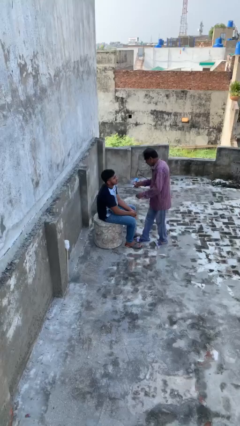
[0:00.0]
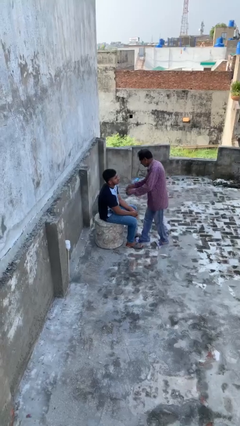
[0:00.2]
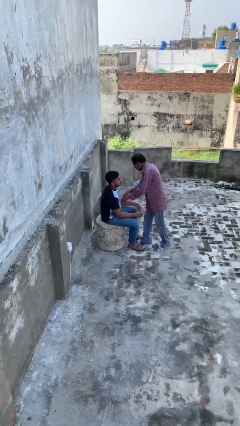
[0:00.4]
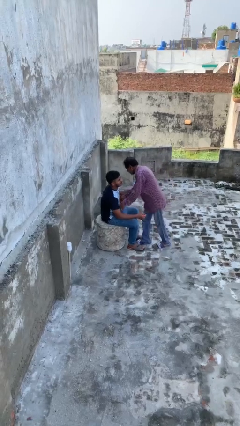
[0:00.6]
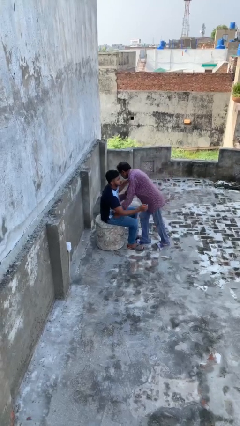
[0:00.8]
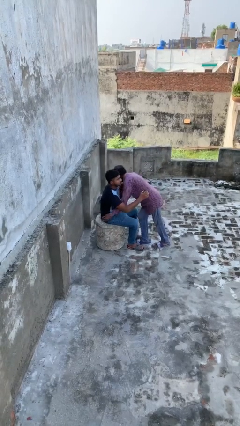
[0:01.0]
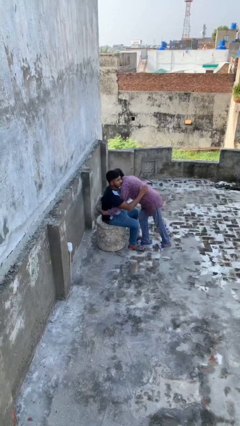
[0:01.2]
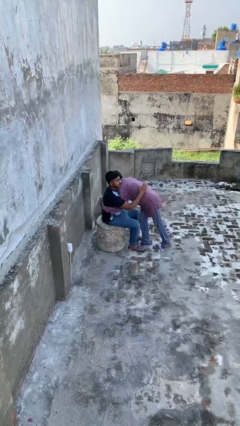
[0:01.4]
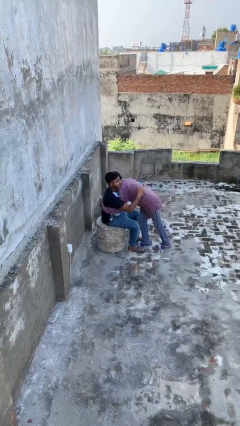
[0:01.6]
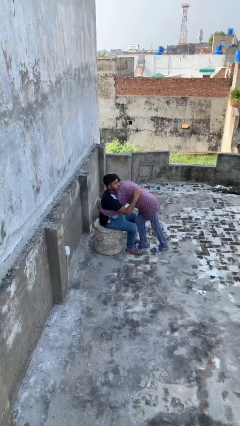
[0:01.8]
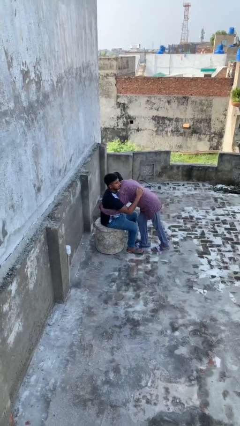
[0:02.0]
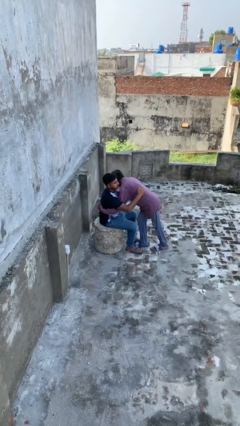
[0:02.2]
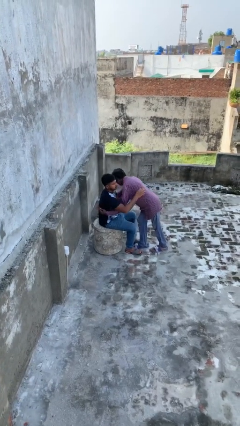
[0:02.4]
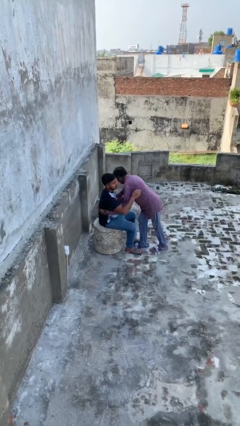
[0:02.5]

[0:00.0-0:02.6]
person embraces person

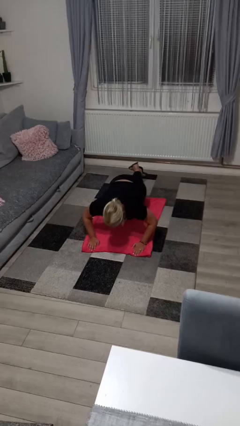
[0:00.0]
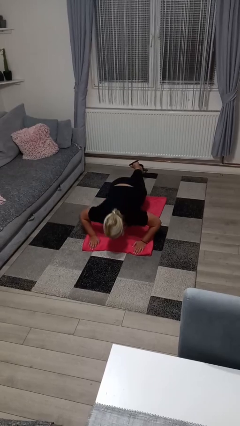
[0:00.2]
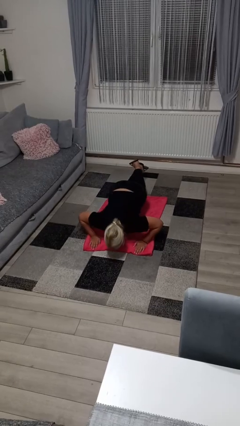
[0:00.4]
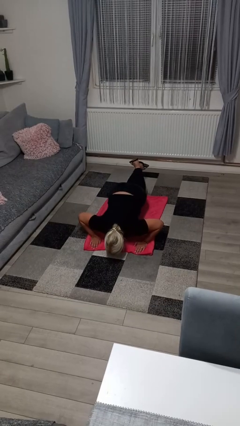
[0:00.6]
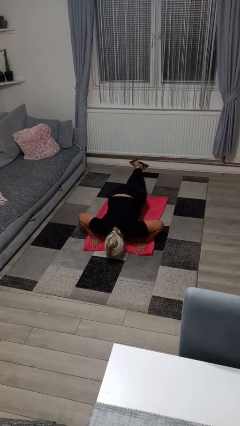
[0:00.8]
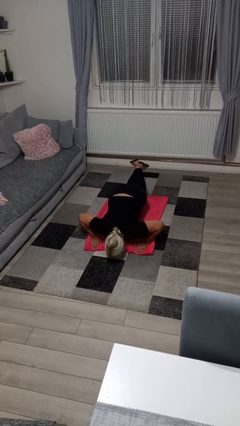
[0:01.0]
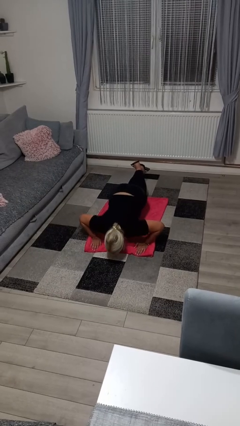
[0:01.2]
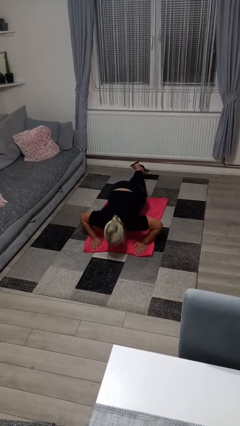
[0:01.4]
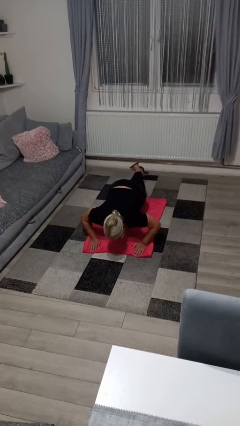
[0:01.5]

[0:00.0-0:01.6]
person exercises with pushup

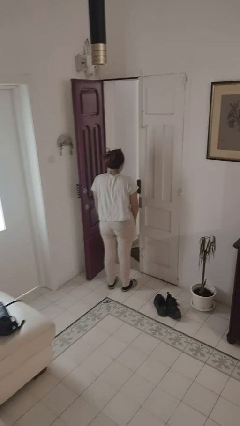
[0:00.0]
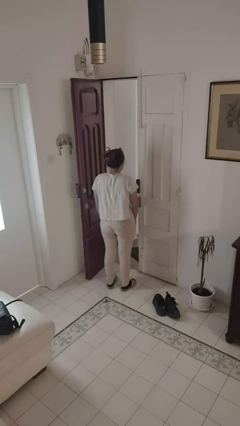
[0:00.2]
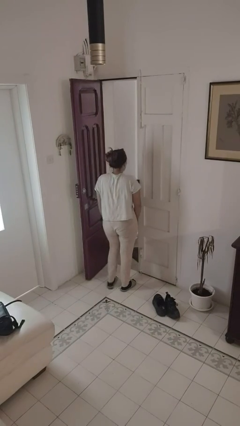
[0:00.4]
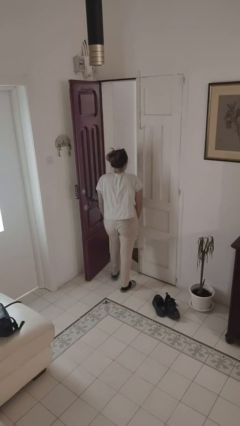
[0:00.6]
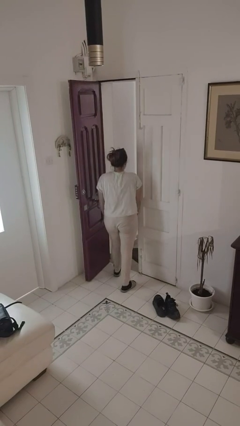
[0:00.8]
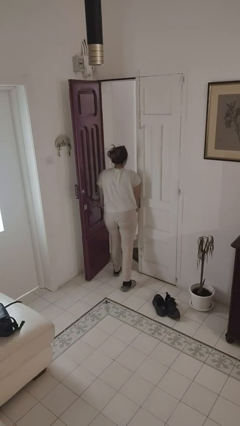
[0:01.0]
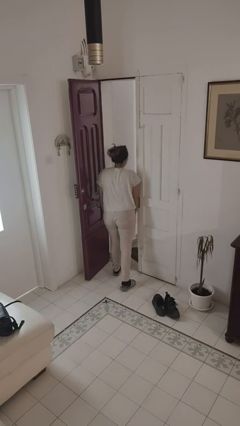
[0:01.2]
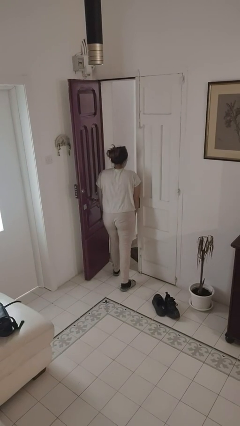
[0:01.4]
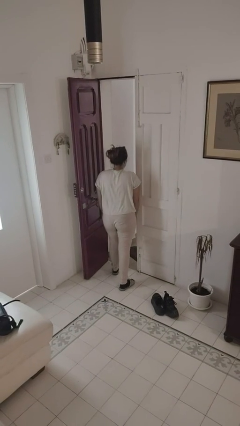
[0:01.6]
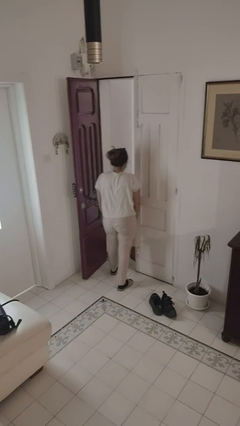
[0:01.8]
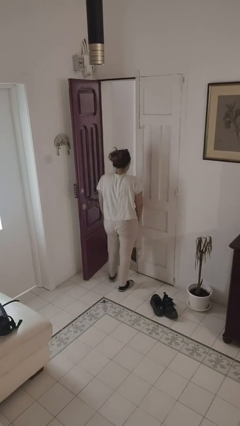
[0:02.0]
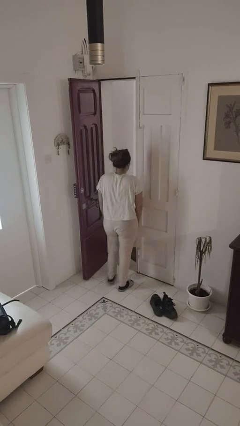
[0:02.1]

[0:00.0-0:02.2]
person bumps into wall

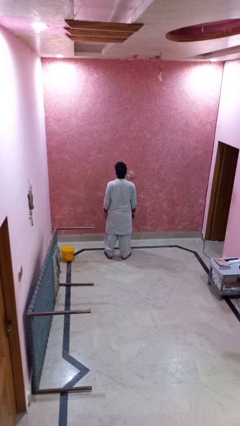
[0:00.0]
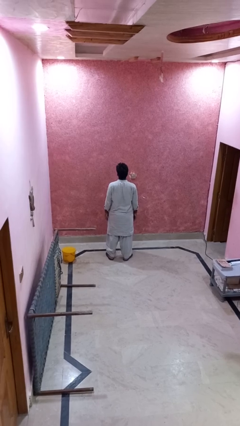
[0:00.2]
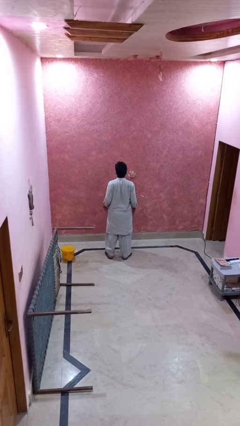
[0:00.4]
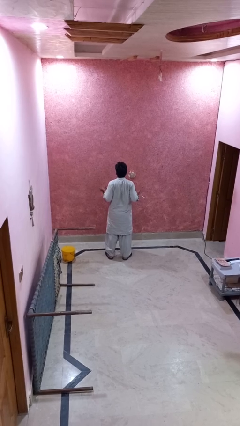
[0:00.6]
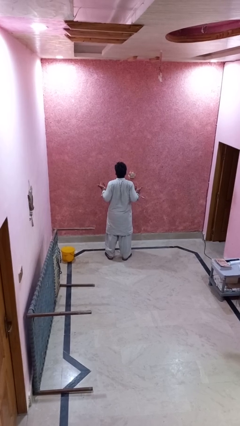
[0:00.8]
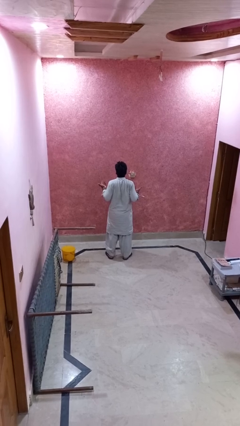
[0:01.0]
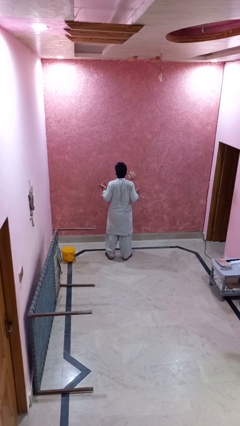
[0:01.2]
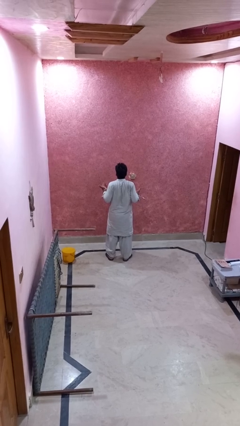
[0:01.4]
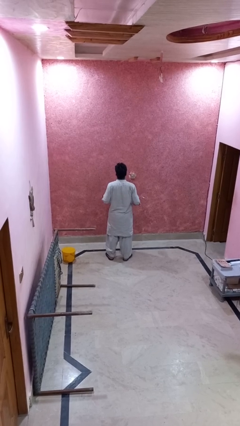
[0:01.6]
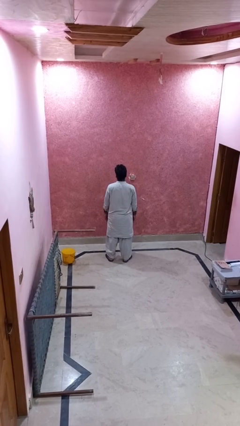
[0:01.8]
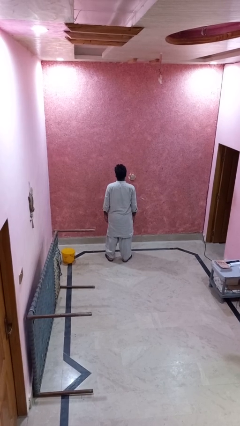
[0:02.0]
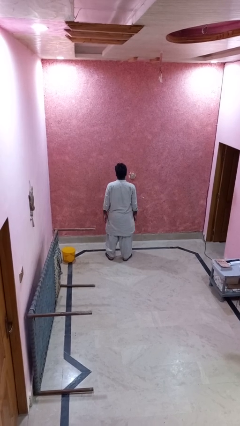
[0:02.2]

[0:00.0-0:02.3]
person shrugs

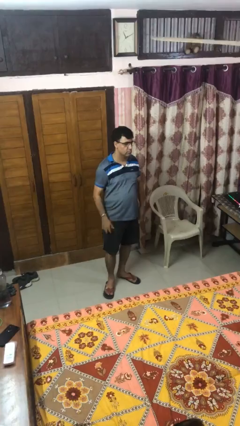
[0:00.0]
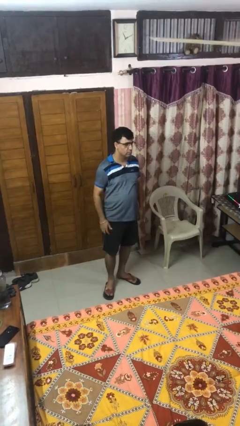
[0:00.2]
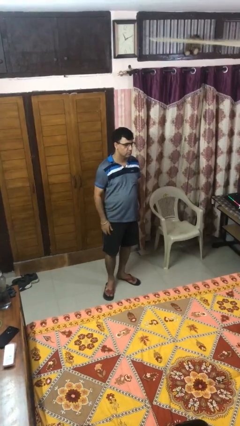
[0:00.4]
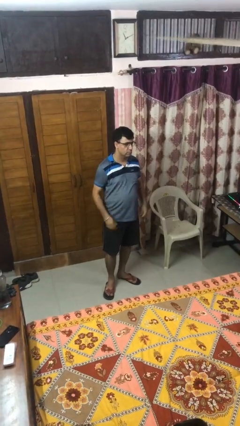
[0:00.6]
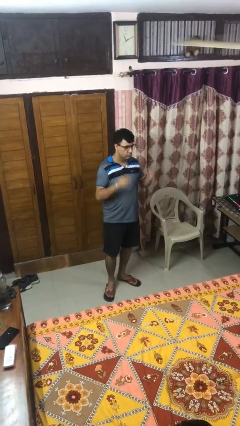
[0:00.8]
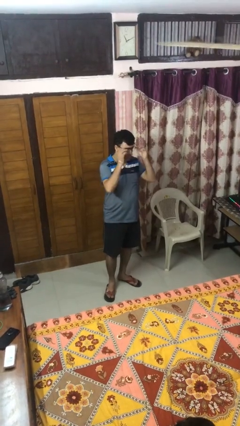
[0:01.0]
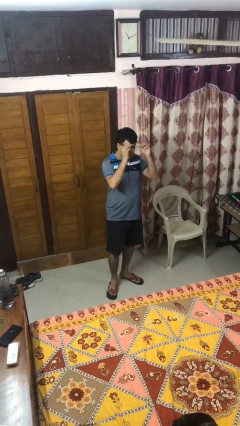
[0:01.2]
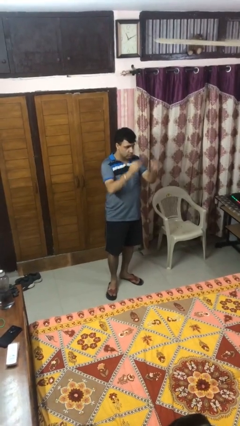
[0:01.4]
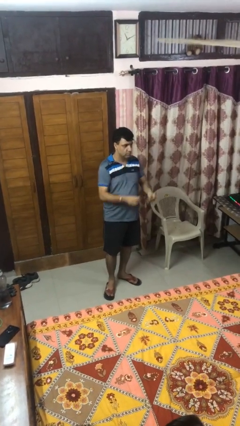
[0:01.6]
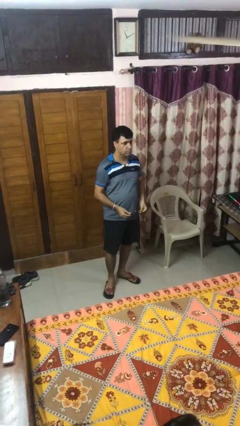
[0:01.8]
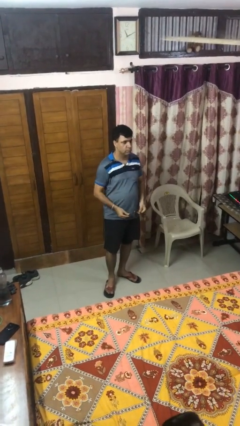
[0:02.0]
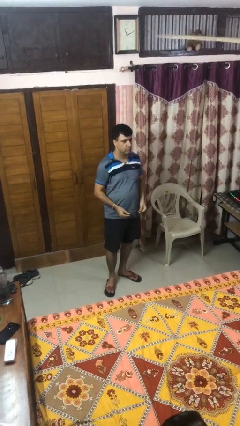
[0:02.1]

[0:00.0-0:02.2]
person takes off glasses

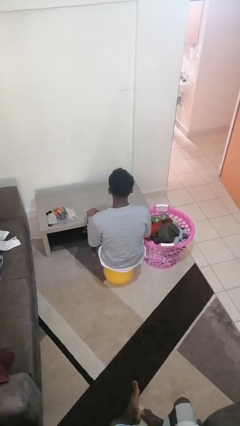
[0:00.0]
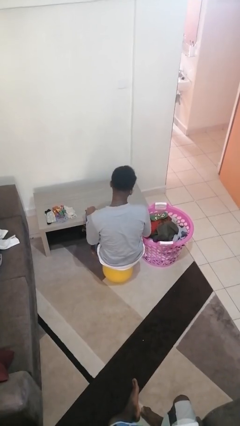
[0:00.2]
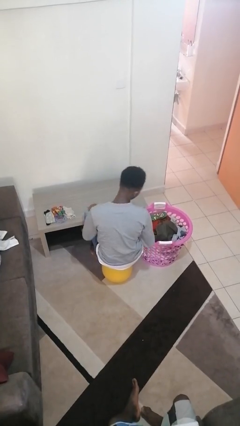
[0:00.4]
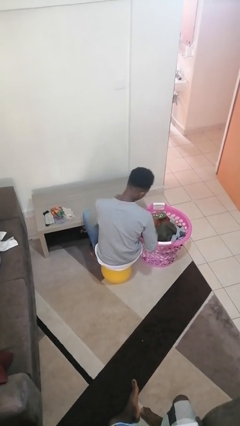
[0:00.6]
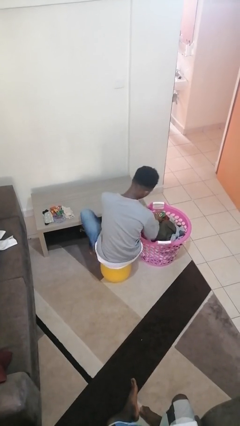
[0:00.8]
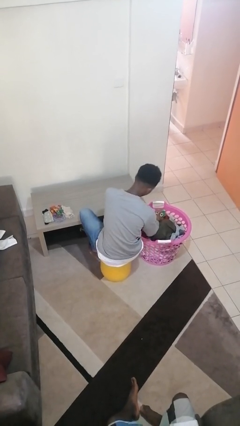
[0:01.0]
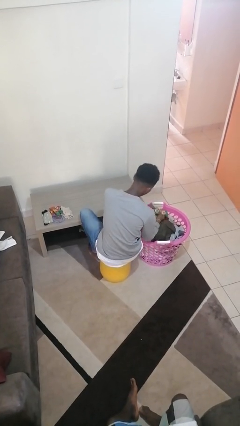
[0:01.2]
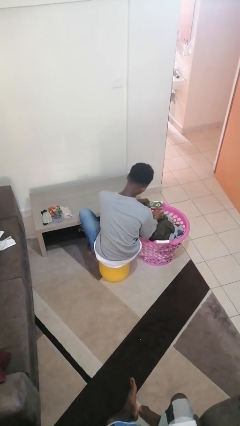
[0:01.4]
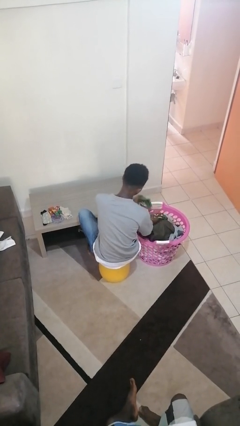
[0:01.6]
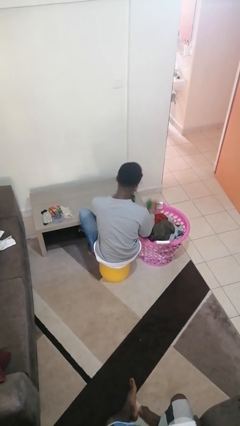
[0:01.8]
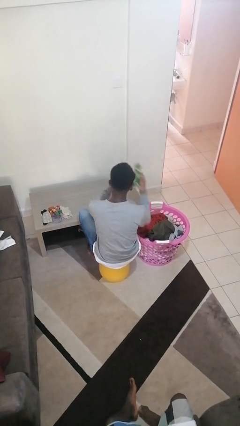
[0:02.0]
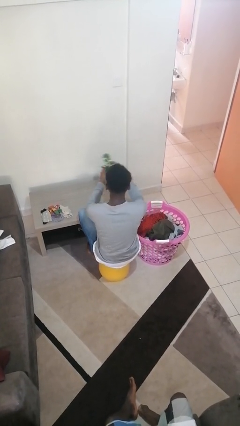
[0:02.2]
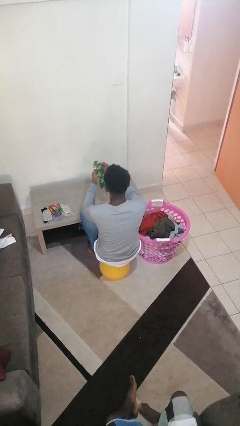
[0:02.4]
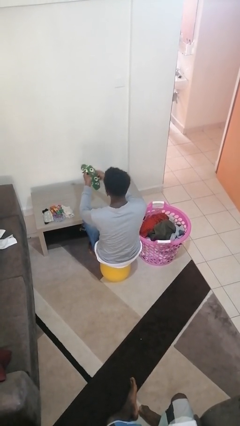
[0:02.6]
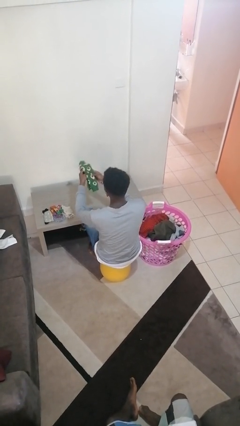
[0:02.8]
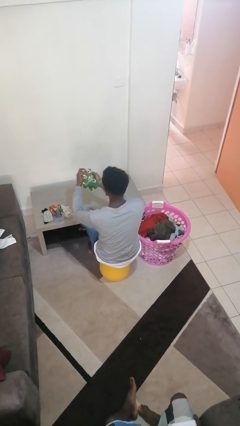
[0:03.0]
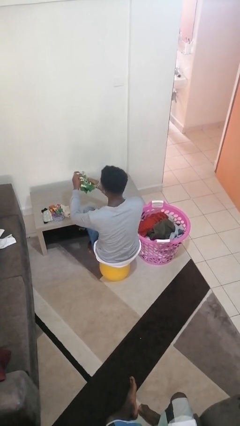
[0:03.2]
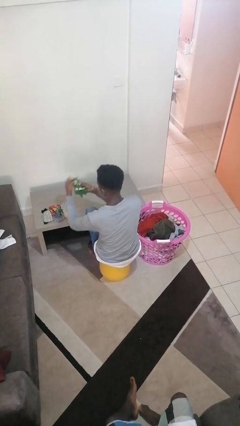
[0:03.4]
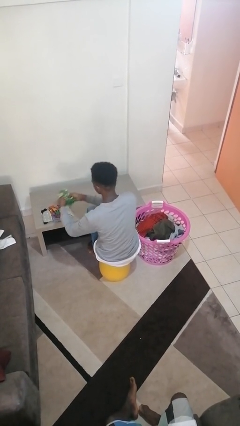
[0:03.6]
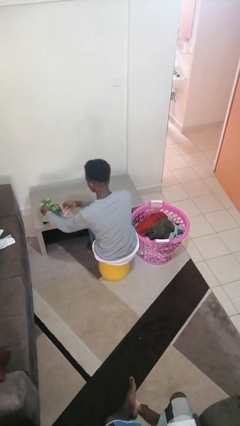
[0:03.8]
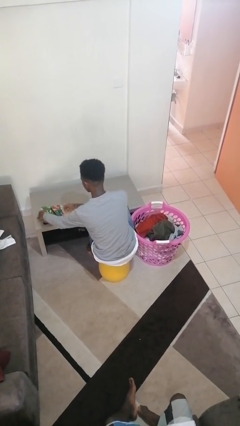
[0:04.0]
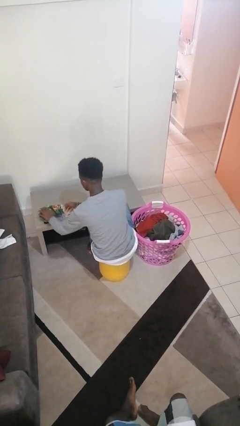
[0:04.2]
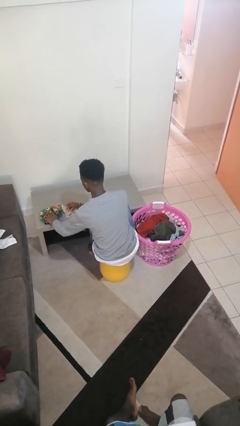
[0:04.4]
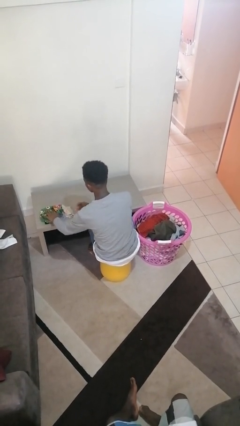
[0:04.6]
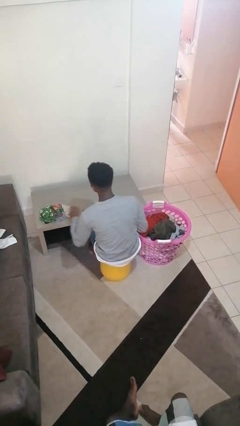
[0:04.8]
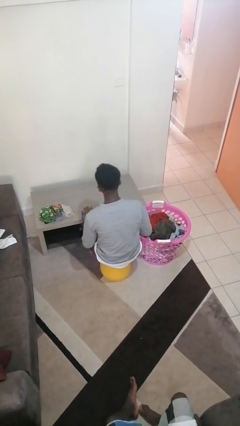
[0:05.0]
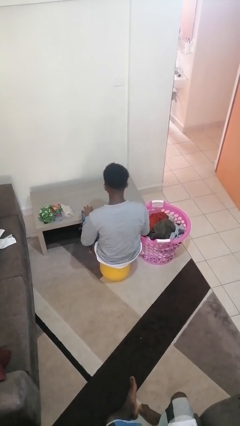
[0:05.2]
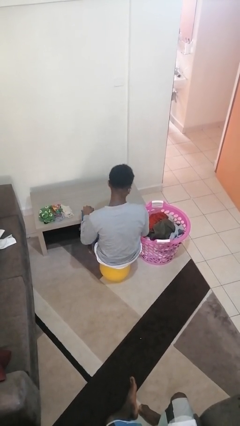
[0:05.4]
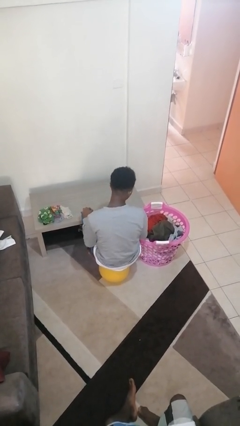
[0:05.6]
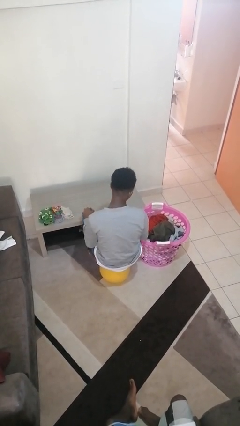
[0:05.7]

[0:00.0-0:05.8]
person folds socks

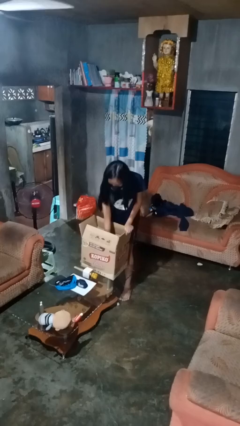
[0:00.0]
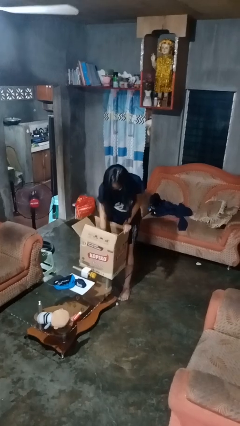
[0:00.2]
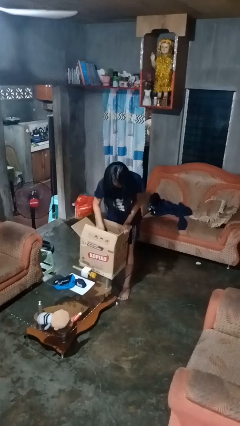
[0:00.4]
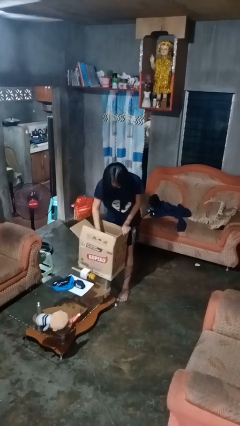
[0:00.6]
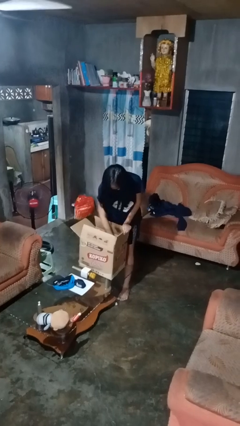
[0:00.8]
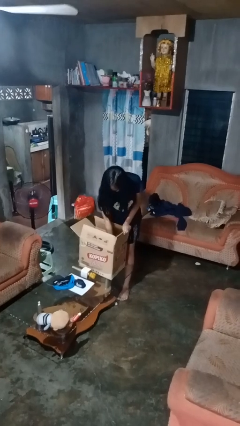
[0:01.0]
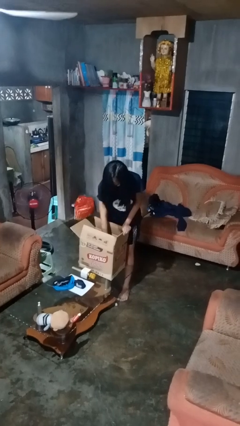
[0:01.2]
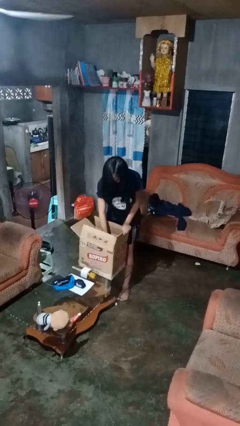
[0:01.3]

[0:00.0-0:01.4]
person searches in box
